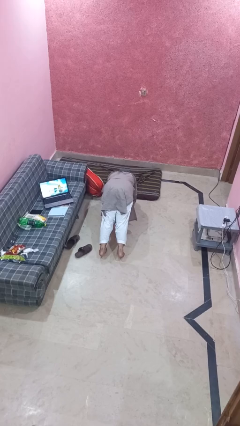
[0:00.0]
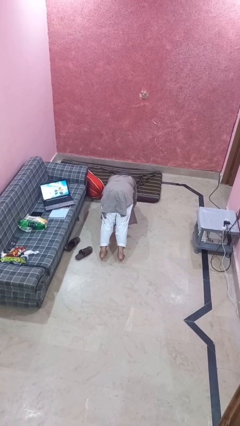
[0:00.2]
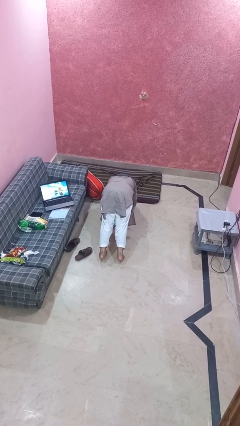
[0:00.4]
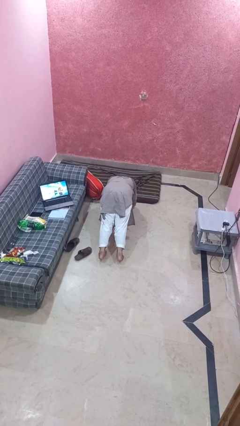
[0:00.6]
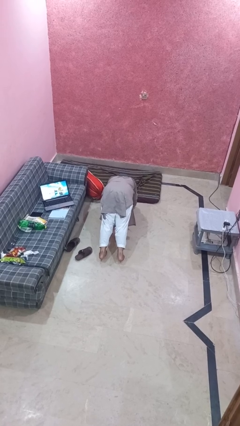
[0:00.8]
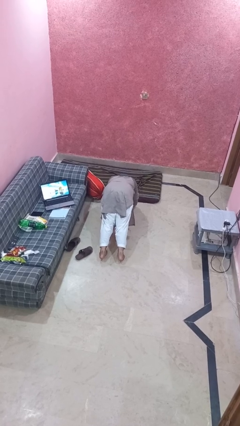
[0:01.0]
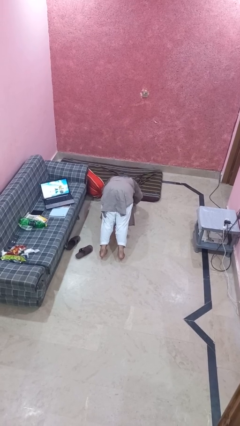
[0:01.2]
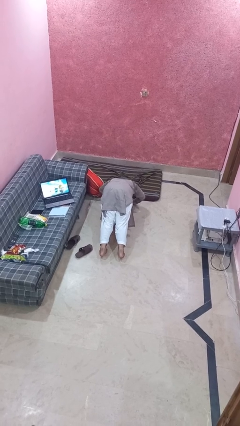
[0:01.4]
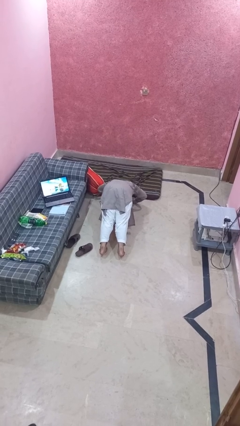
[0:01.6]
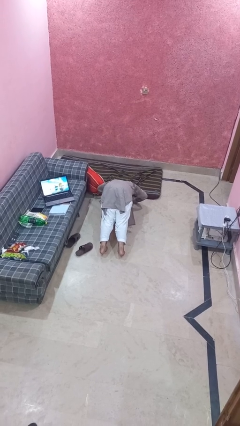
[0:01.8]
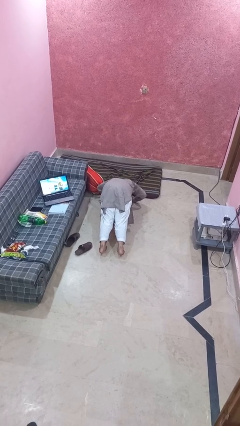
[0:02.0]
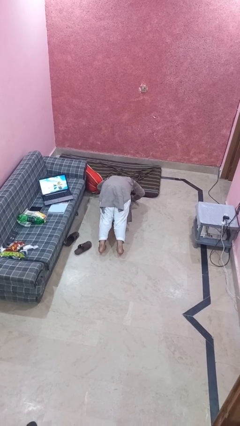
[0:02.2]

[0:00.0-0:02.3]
person exercises with pushup

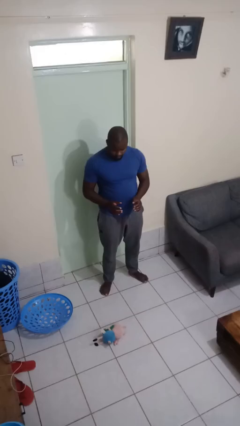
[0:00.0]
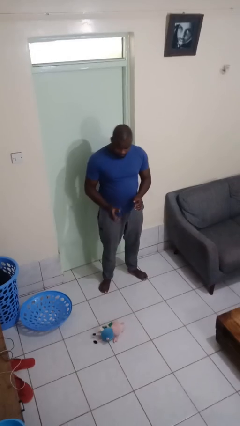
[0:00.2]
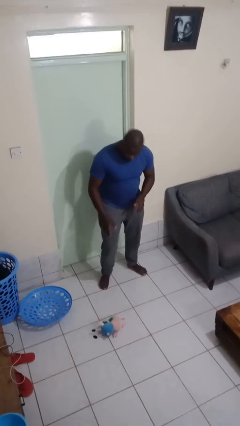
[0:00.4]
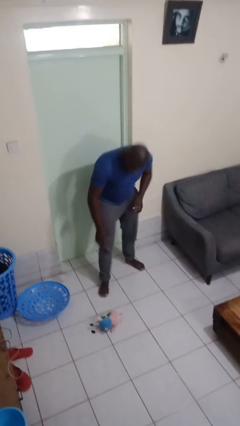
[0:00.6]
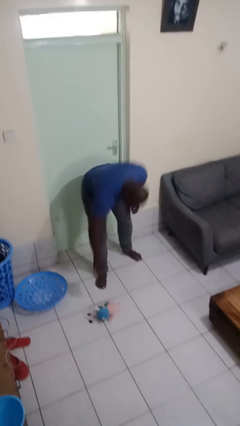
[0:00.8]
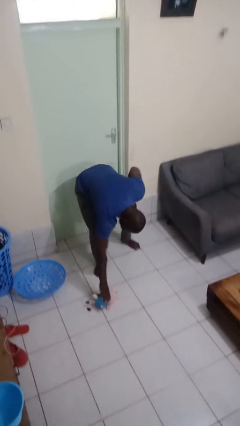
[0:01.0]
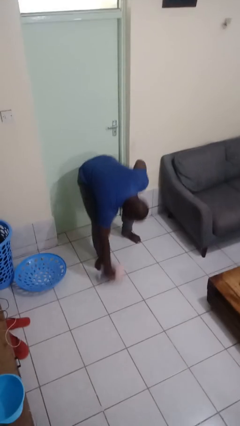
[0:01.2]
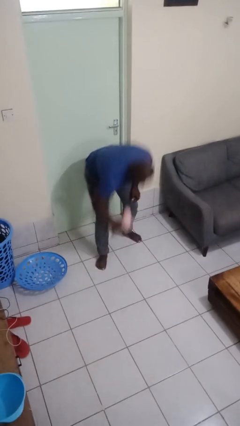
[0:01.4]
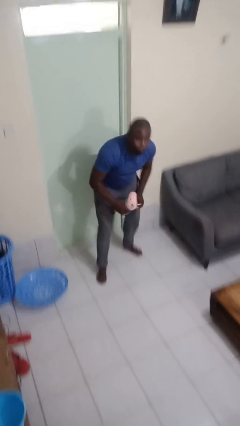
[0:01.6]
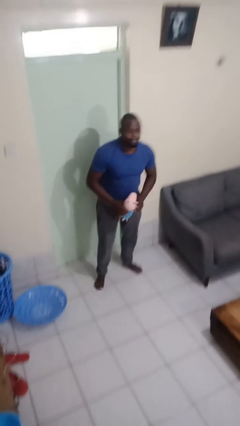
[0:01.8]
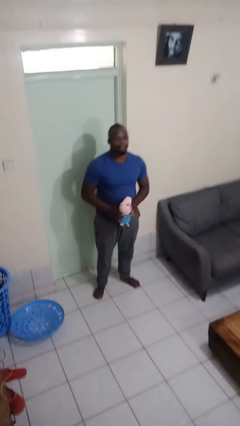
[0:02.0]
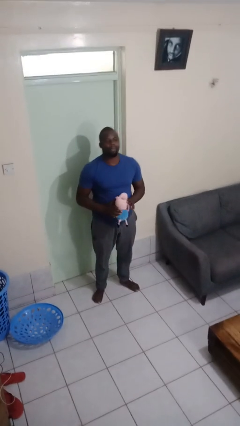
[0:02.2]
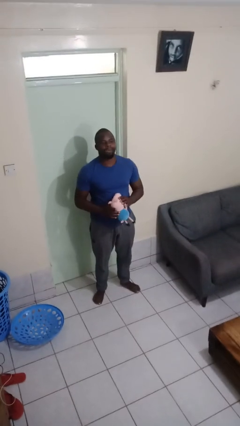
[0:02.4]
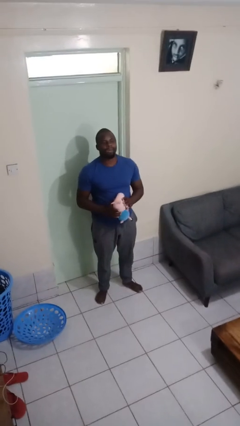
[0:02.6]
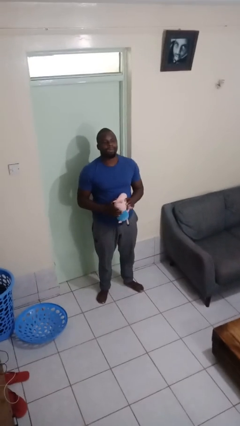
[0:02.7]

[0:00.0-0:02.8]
person picks up object from floor

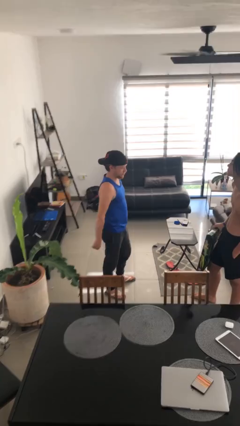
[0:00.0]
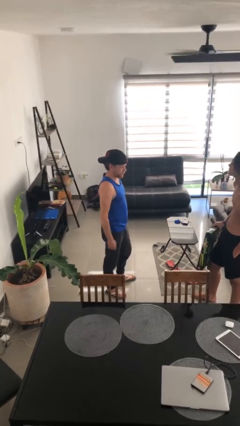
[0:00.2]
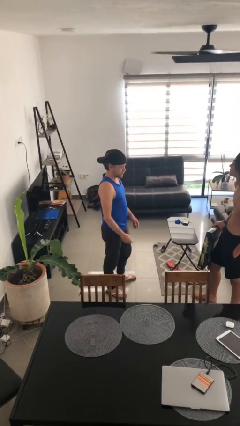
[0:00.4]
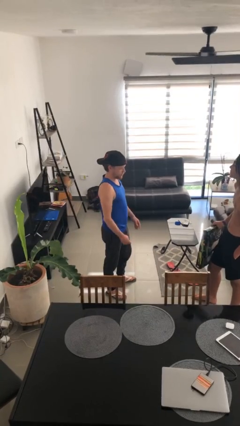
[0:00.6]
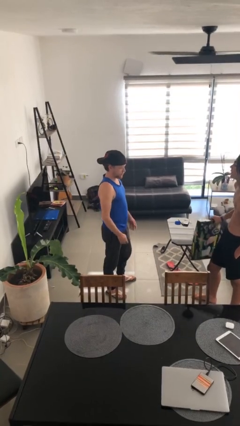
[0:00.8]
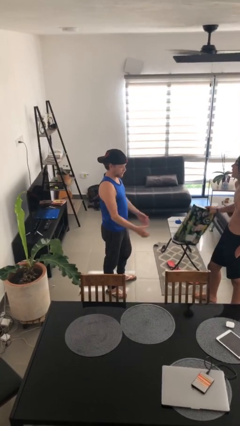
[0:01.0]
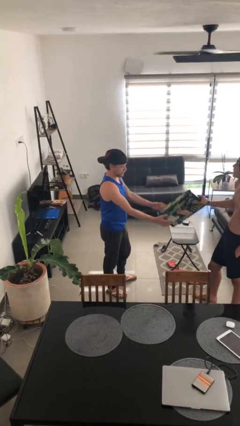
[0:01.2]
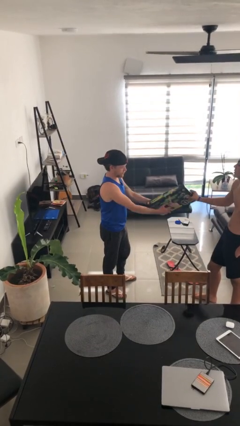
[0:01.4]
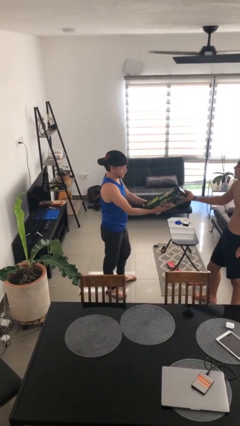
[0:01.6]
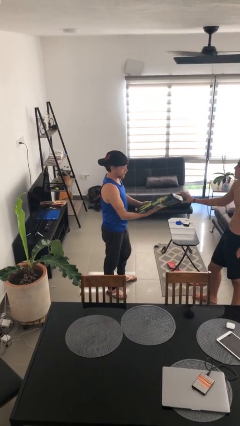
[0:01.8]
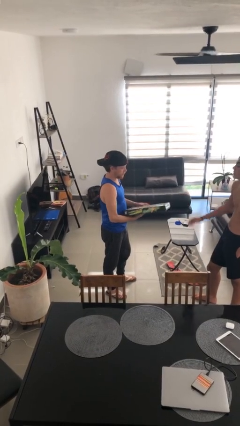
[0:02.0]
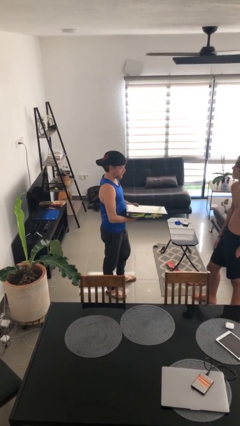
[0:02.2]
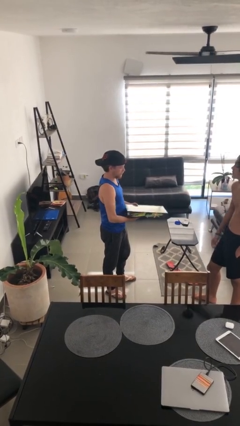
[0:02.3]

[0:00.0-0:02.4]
person transfers object to person

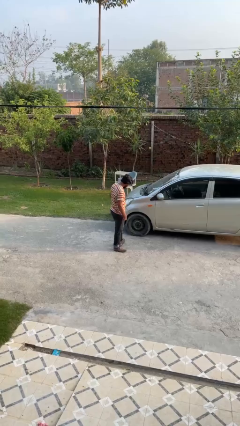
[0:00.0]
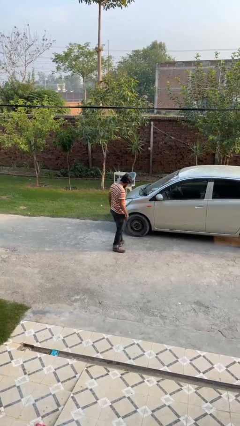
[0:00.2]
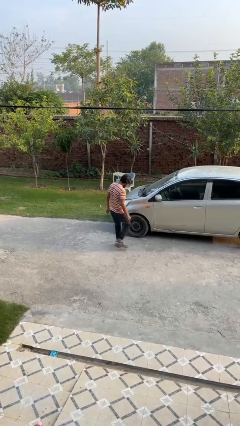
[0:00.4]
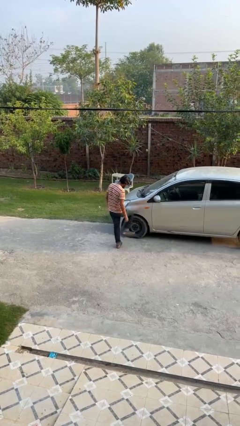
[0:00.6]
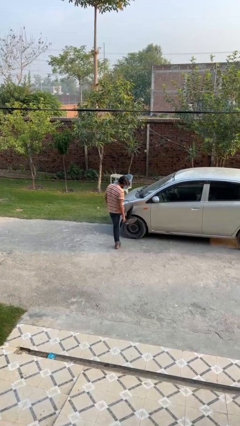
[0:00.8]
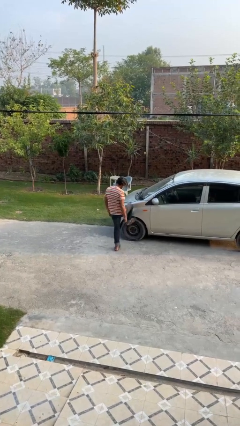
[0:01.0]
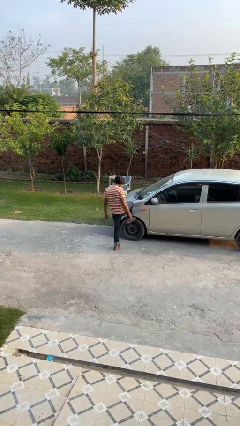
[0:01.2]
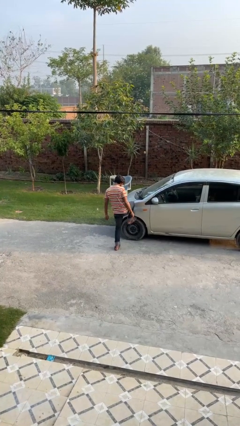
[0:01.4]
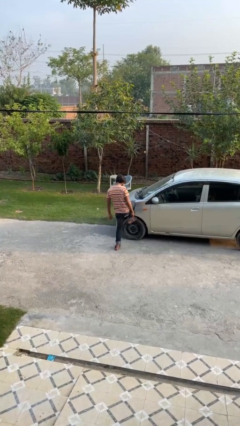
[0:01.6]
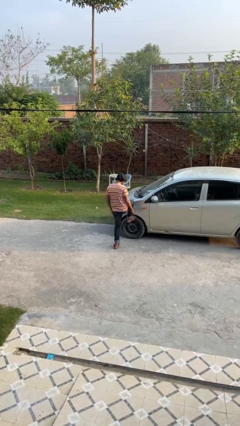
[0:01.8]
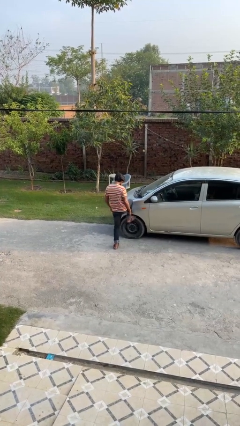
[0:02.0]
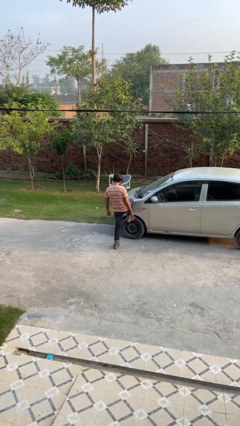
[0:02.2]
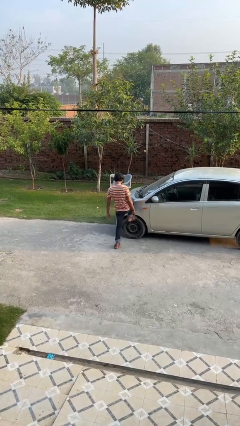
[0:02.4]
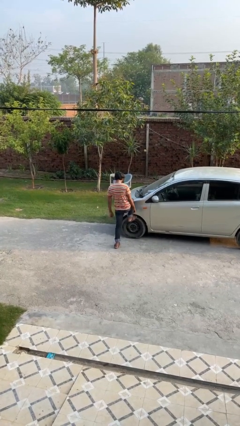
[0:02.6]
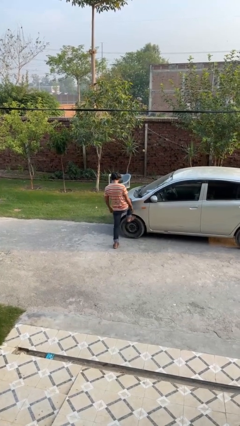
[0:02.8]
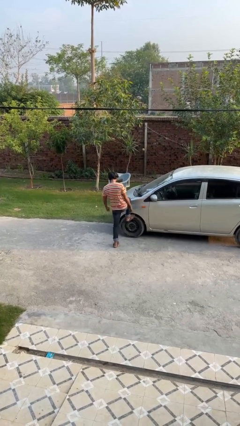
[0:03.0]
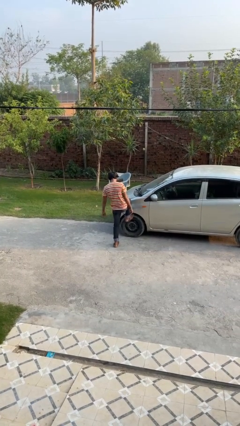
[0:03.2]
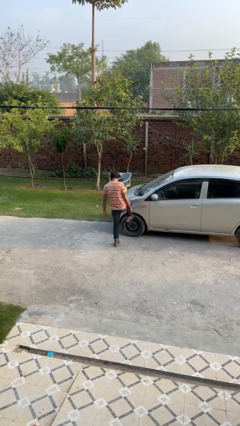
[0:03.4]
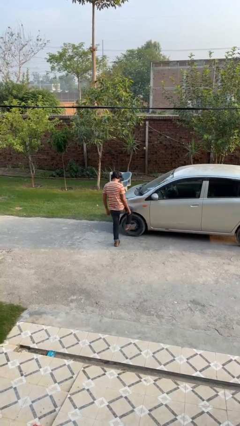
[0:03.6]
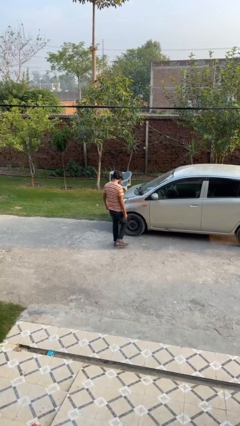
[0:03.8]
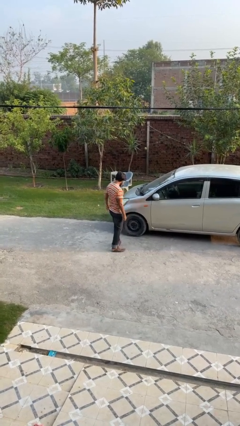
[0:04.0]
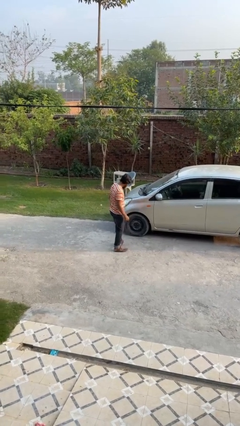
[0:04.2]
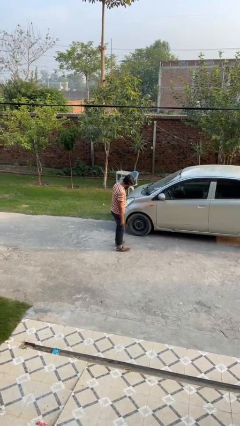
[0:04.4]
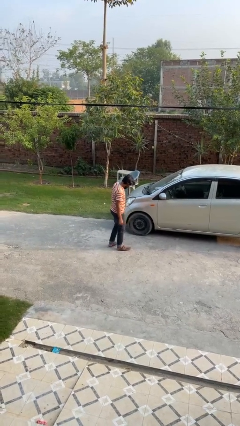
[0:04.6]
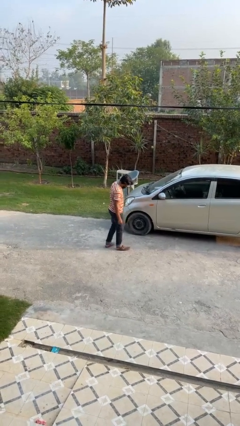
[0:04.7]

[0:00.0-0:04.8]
person kicks car tires

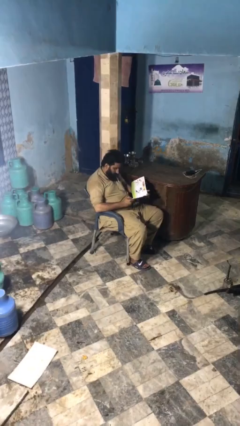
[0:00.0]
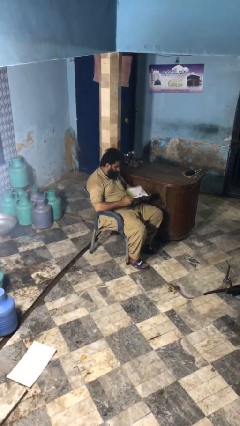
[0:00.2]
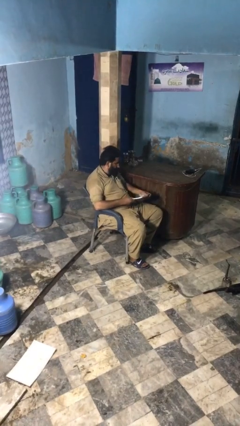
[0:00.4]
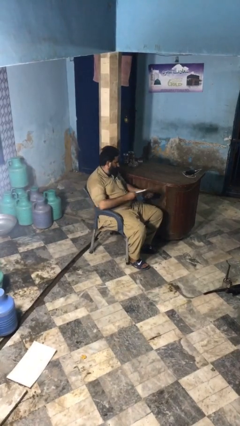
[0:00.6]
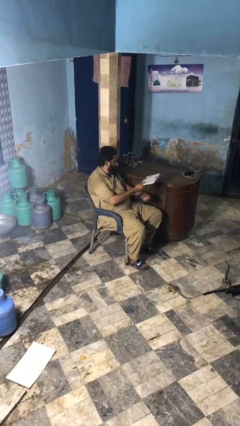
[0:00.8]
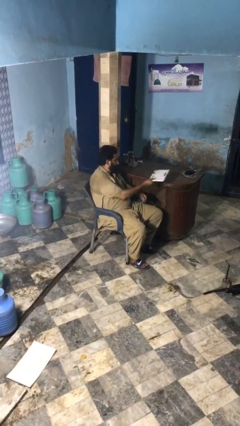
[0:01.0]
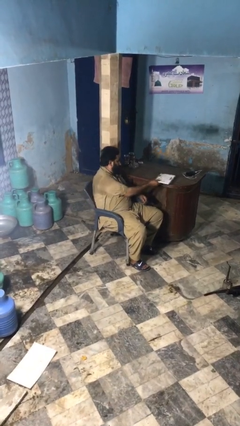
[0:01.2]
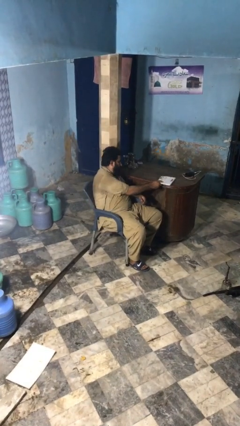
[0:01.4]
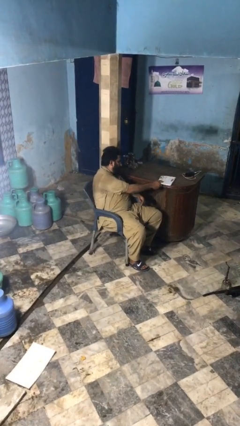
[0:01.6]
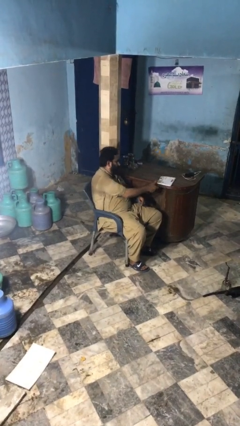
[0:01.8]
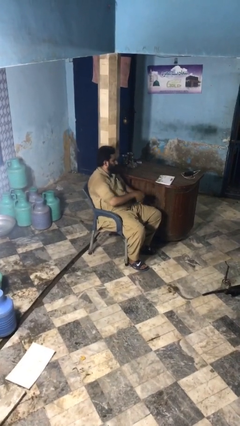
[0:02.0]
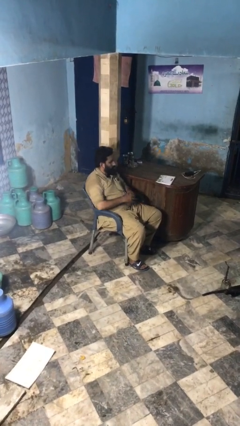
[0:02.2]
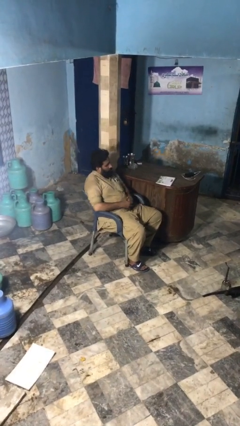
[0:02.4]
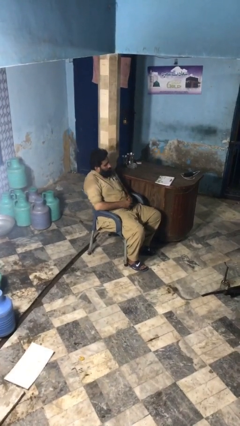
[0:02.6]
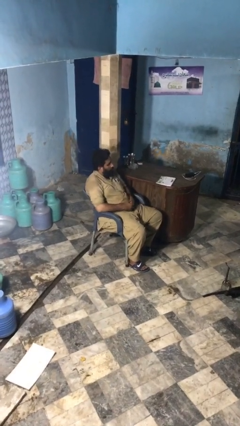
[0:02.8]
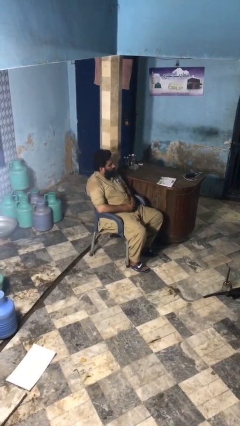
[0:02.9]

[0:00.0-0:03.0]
person puts down object on table

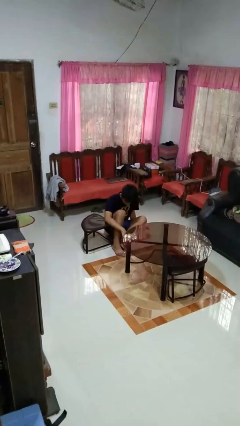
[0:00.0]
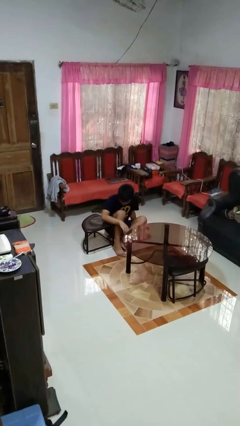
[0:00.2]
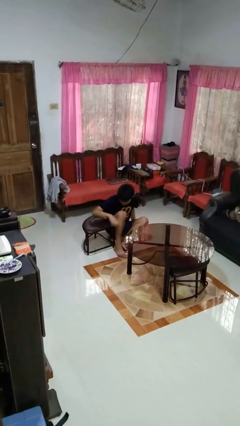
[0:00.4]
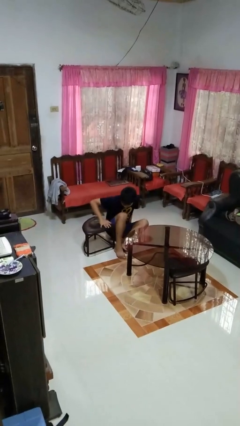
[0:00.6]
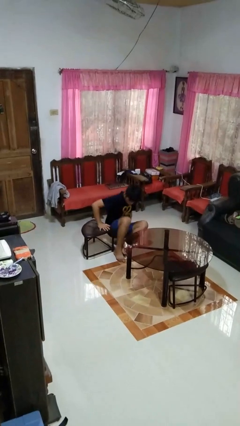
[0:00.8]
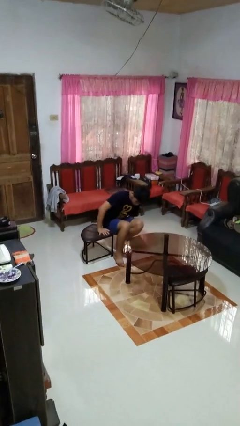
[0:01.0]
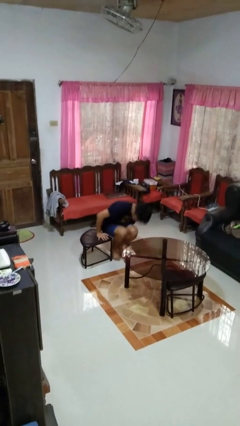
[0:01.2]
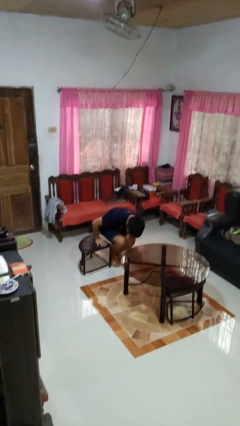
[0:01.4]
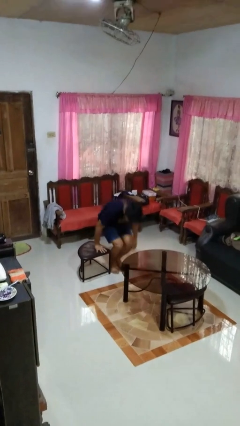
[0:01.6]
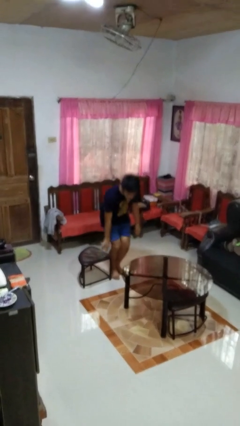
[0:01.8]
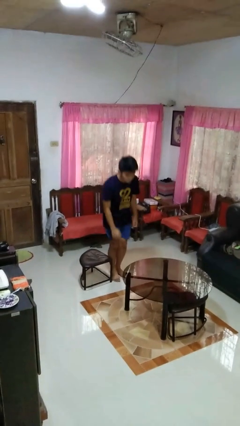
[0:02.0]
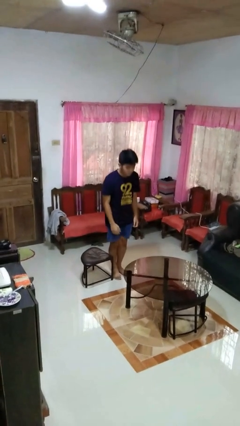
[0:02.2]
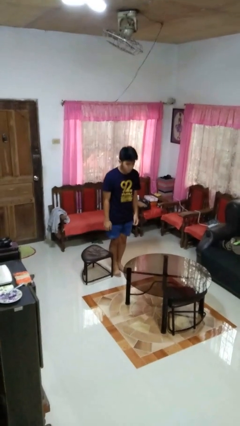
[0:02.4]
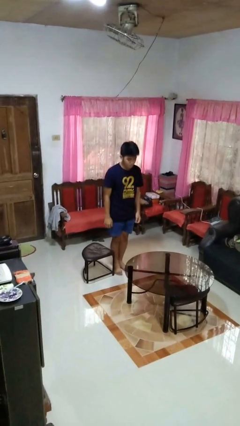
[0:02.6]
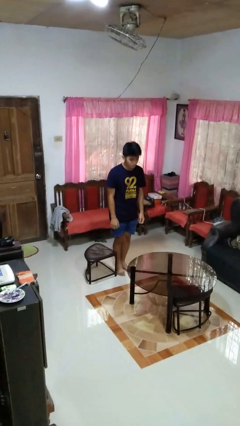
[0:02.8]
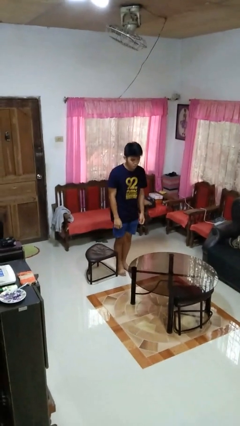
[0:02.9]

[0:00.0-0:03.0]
person stands up from floor
